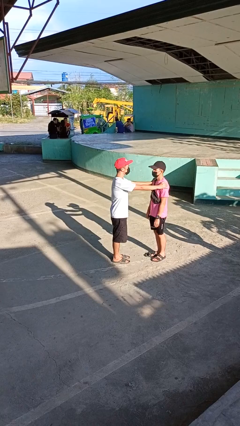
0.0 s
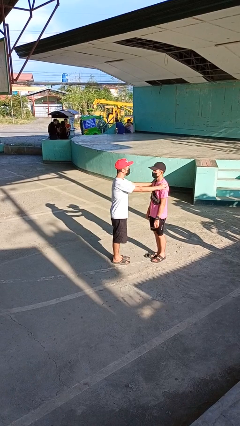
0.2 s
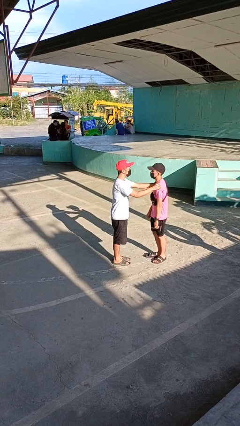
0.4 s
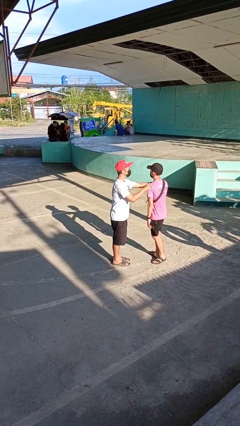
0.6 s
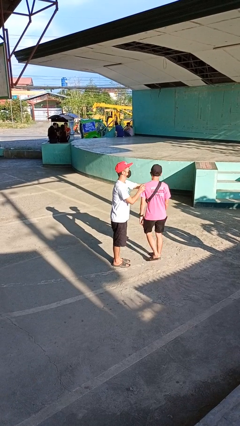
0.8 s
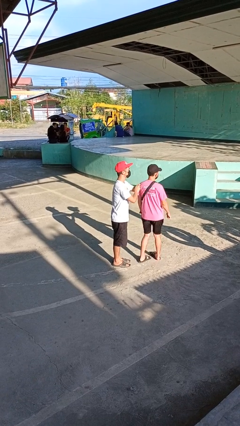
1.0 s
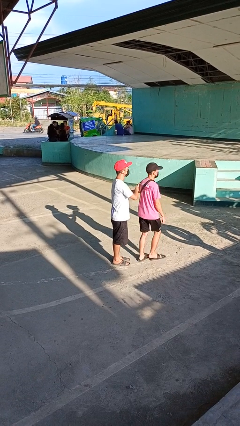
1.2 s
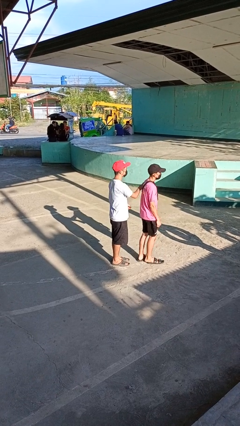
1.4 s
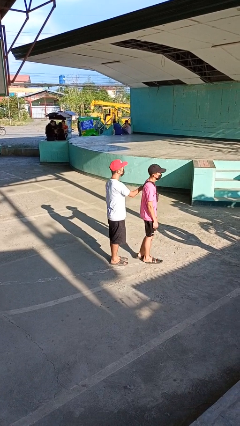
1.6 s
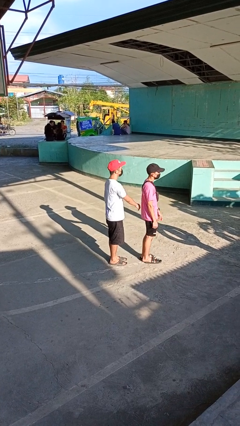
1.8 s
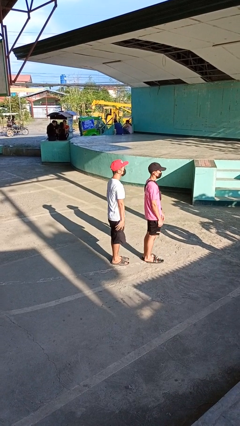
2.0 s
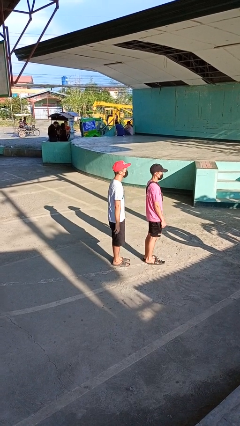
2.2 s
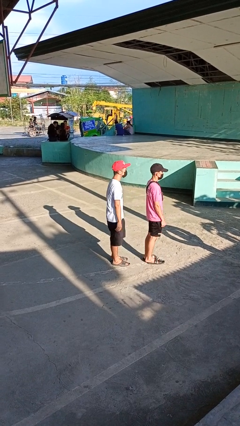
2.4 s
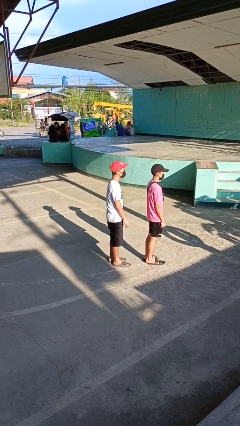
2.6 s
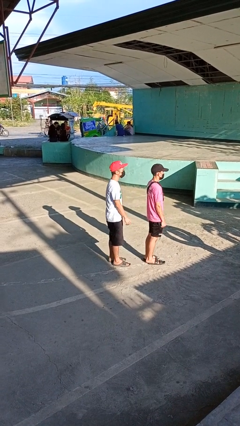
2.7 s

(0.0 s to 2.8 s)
person spins person around

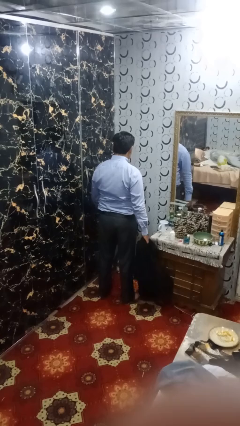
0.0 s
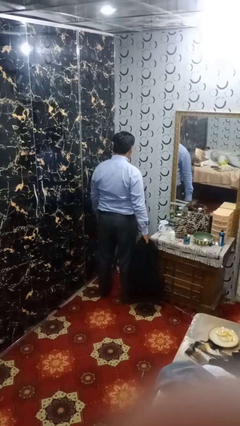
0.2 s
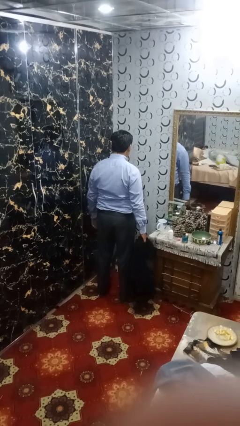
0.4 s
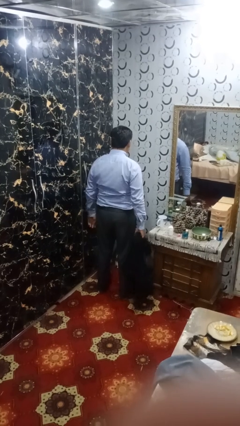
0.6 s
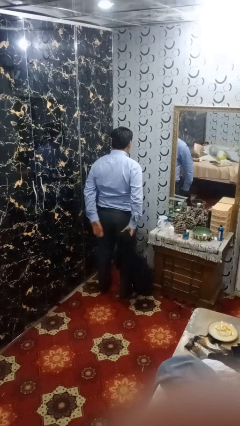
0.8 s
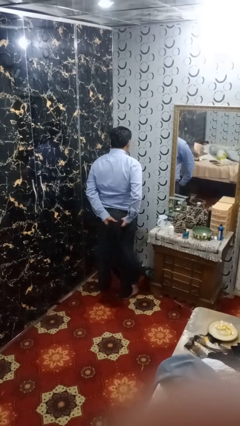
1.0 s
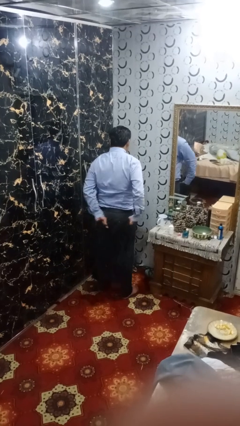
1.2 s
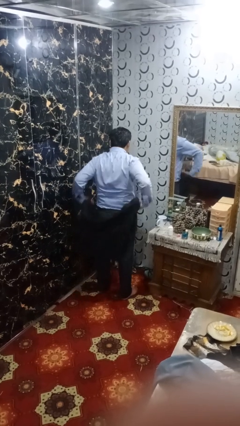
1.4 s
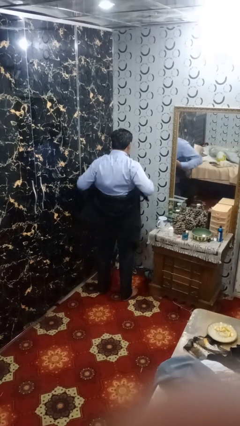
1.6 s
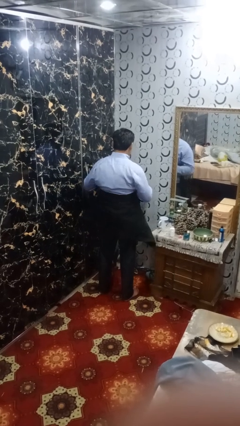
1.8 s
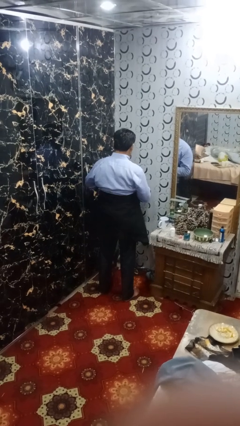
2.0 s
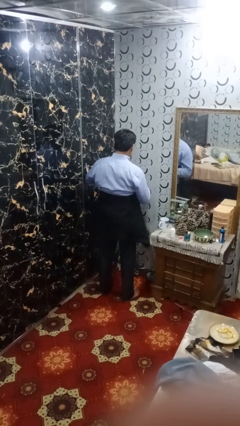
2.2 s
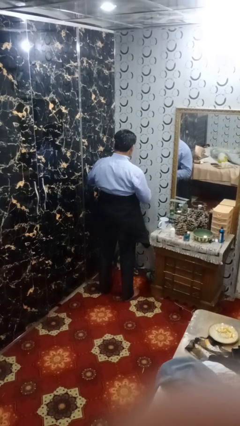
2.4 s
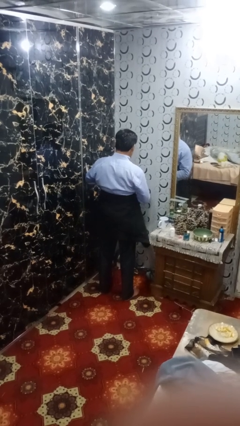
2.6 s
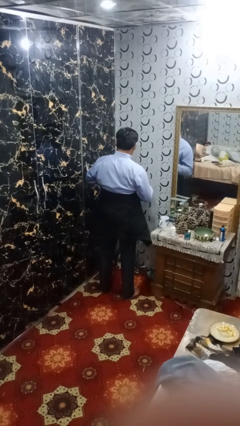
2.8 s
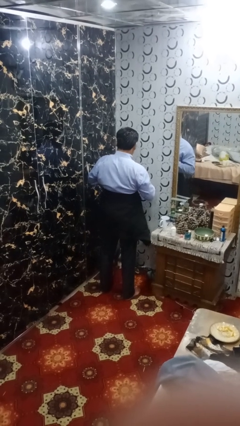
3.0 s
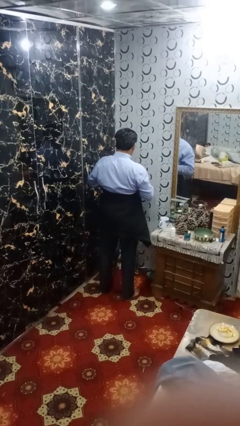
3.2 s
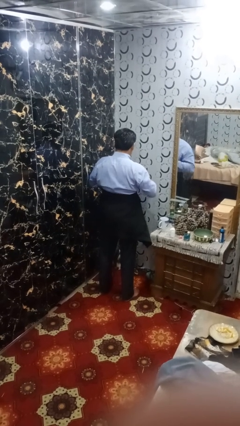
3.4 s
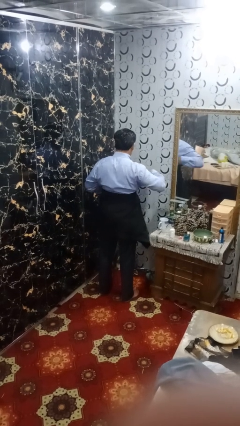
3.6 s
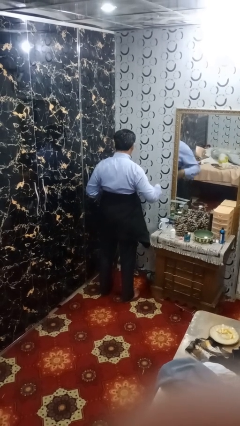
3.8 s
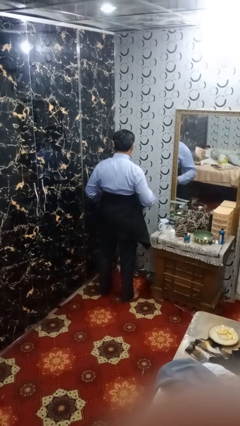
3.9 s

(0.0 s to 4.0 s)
person ties jacket around waist

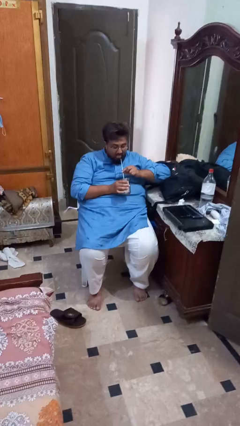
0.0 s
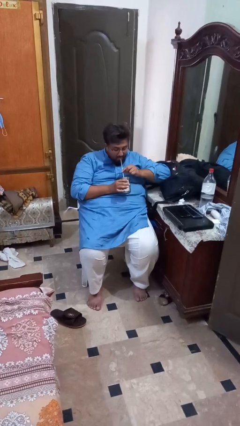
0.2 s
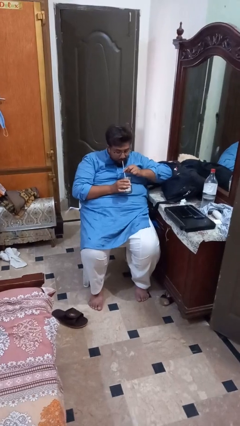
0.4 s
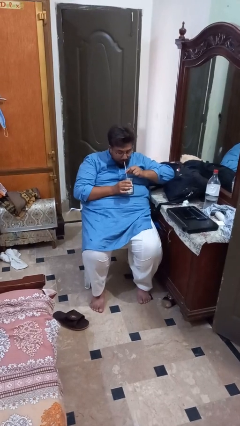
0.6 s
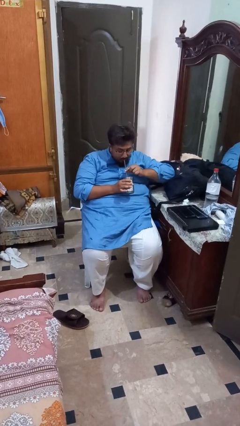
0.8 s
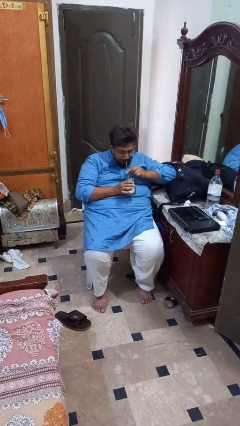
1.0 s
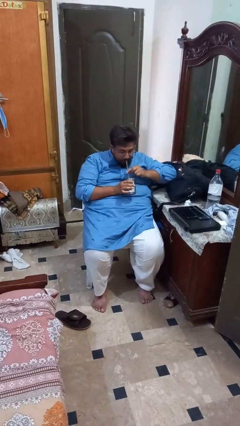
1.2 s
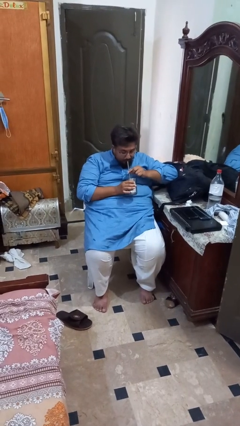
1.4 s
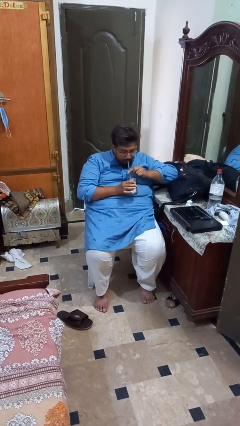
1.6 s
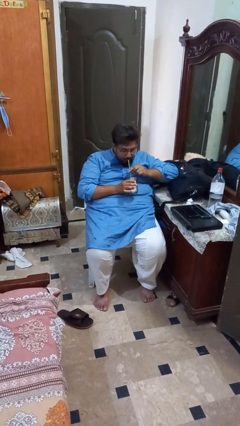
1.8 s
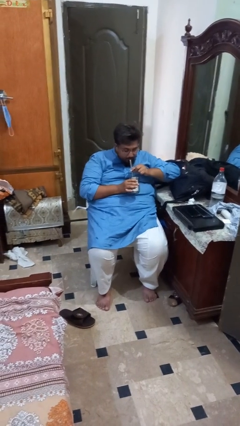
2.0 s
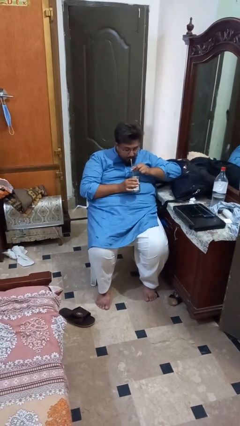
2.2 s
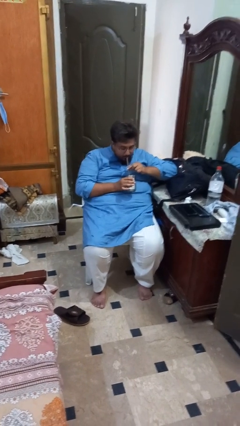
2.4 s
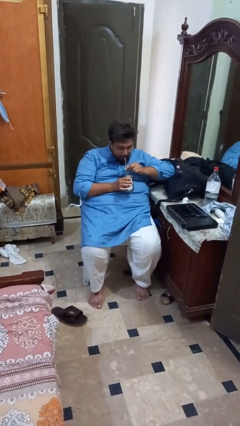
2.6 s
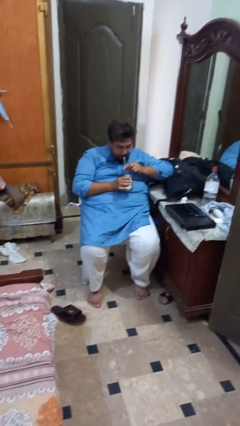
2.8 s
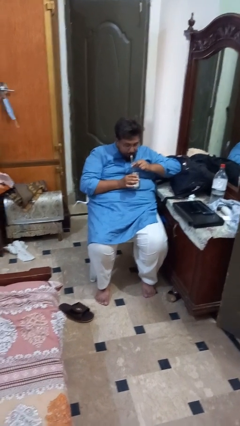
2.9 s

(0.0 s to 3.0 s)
person drinks from straw

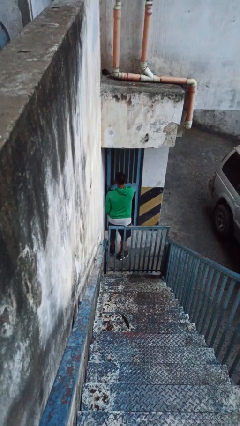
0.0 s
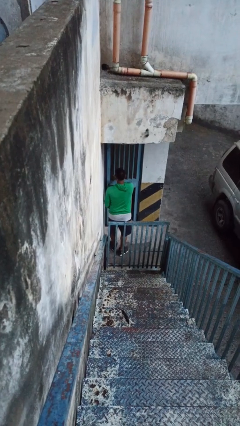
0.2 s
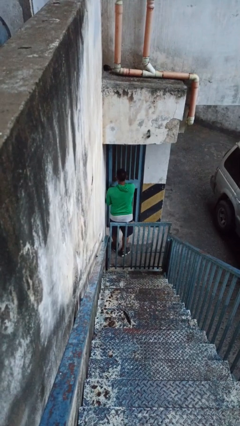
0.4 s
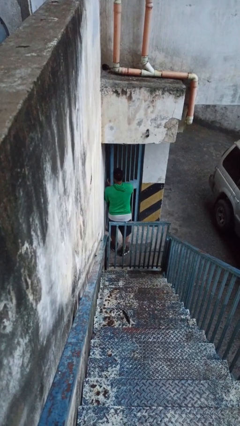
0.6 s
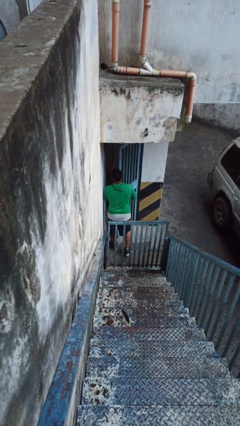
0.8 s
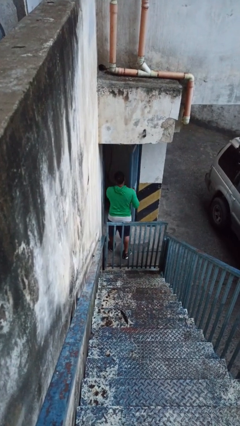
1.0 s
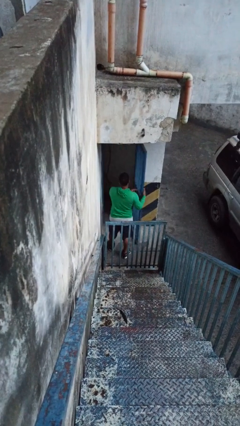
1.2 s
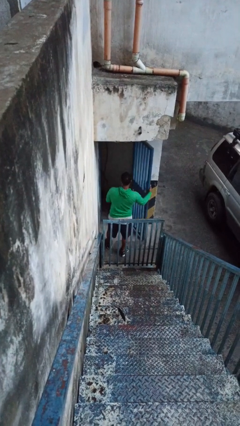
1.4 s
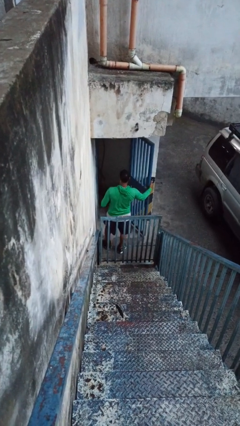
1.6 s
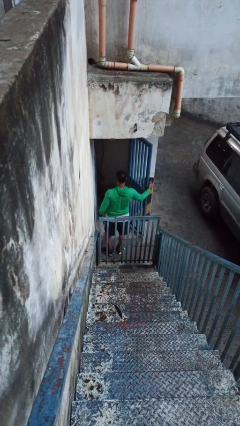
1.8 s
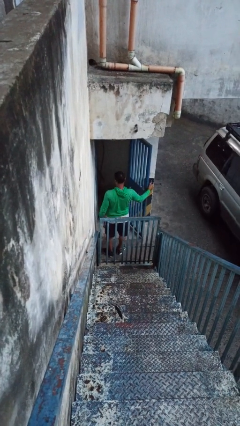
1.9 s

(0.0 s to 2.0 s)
person opens facility door

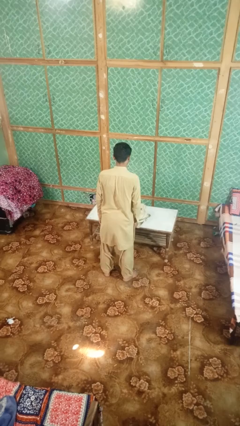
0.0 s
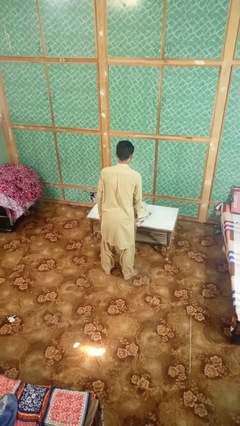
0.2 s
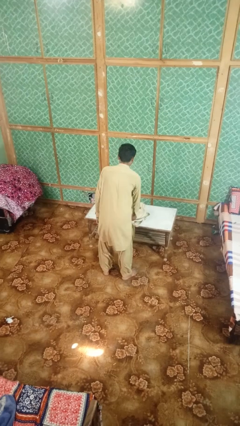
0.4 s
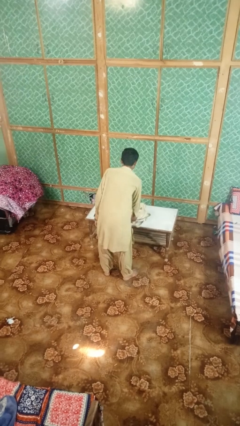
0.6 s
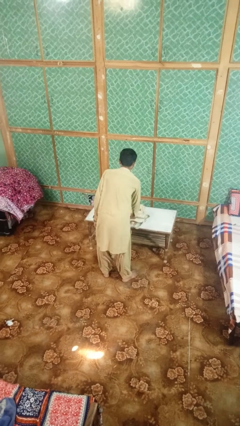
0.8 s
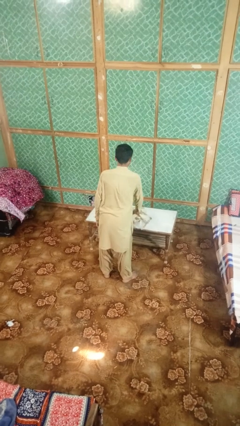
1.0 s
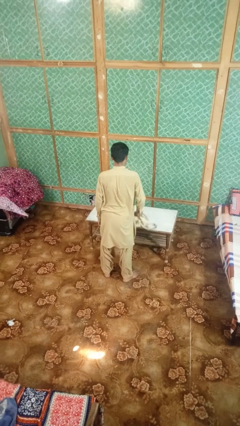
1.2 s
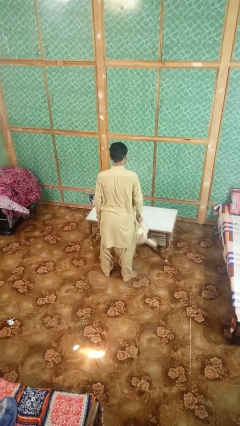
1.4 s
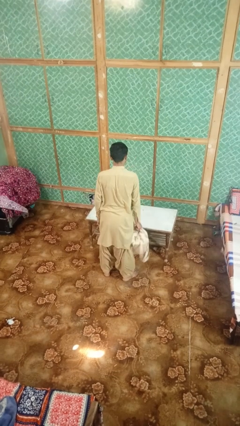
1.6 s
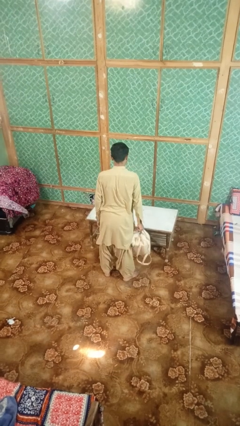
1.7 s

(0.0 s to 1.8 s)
person picks up object from table

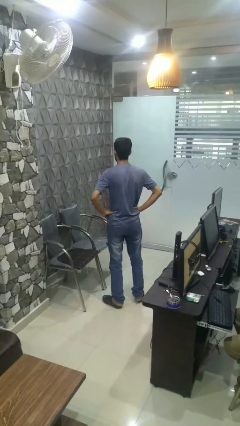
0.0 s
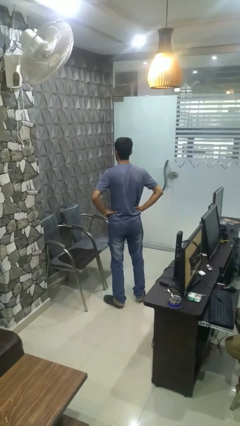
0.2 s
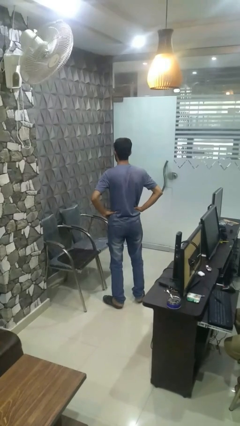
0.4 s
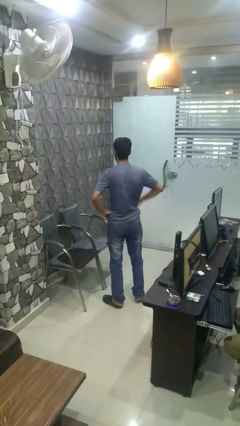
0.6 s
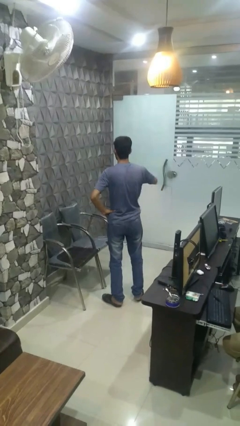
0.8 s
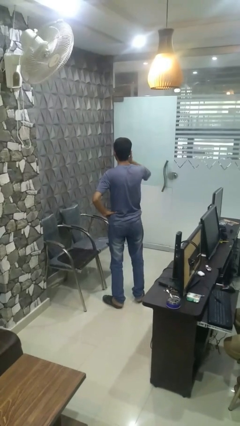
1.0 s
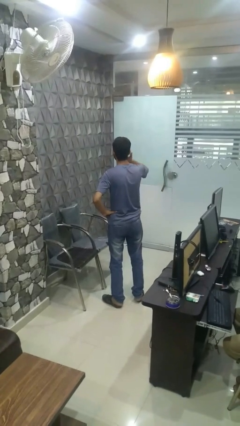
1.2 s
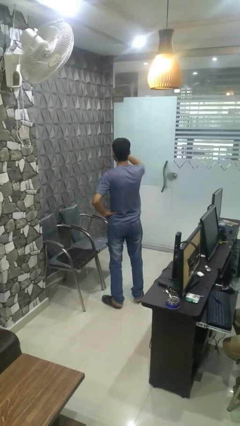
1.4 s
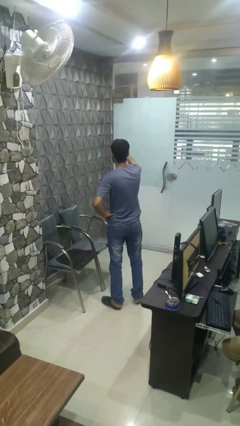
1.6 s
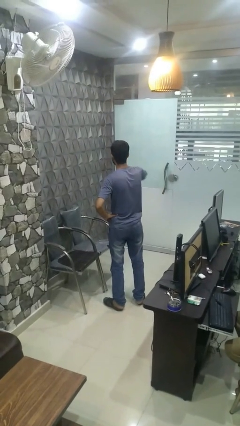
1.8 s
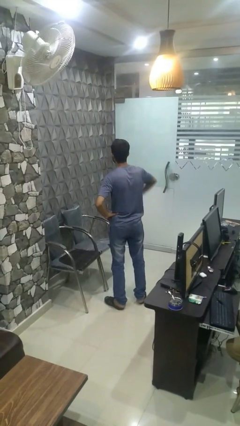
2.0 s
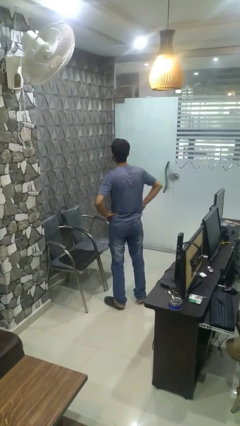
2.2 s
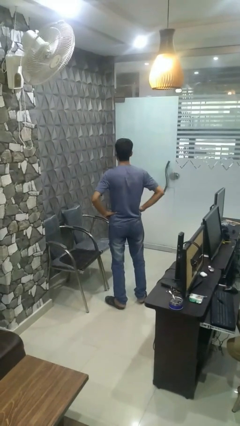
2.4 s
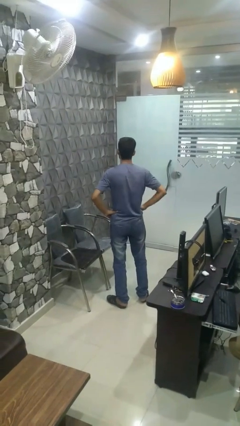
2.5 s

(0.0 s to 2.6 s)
person gestures blow kiss

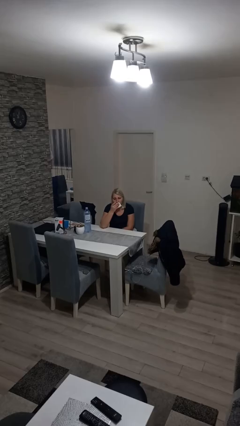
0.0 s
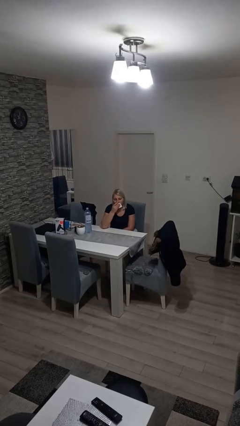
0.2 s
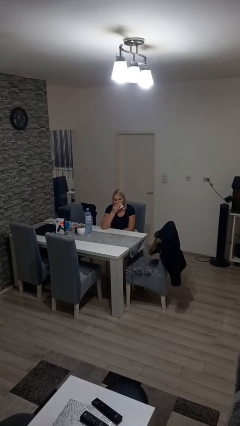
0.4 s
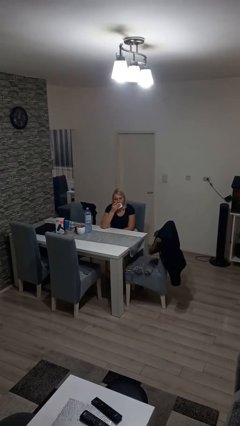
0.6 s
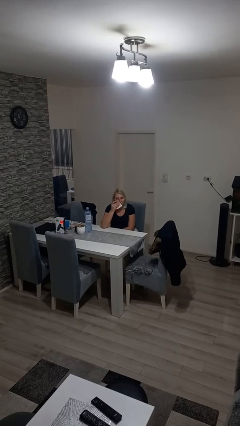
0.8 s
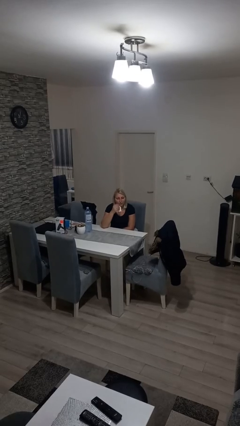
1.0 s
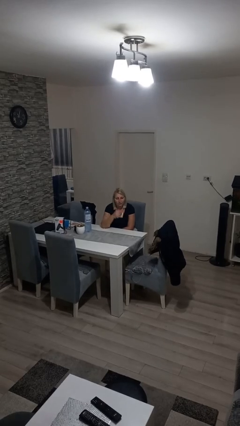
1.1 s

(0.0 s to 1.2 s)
person wipes mouth with napkin
